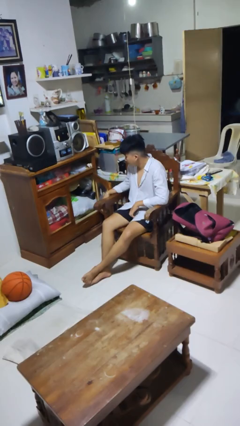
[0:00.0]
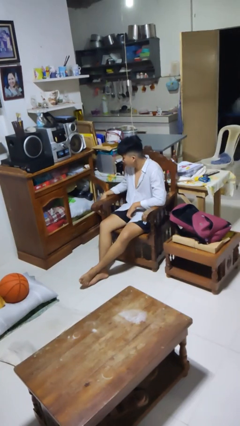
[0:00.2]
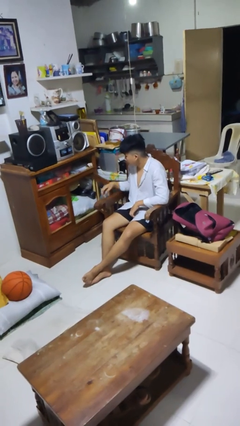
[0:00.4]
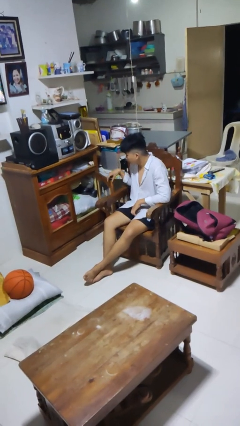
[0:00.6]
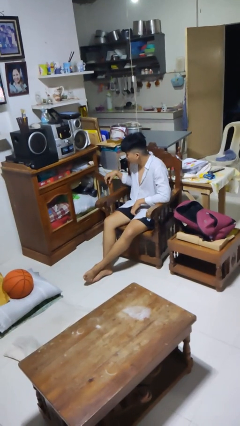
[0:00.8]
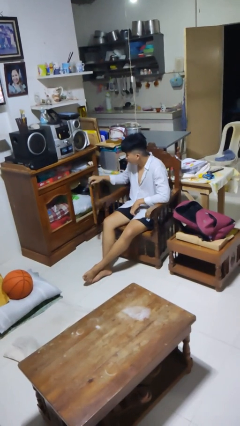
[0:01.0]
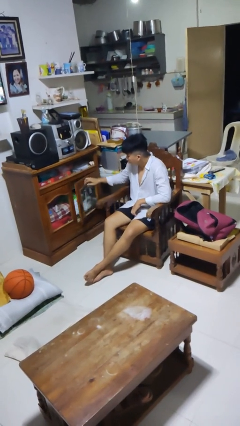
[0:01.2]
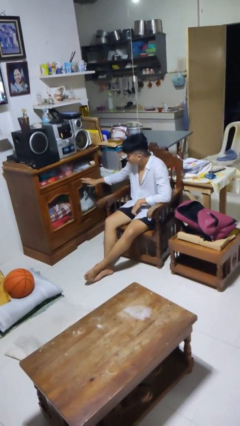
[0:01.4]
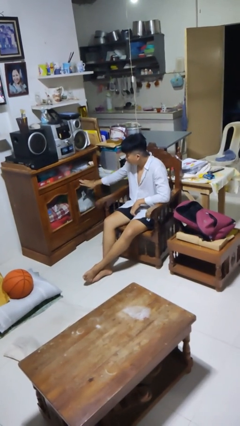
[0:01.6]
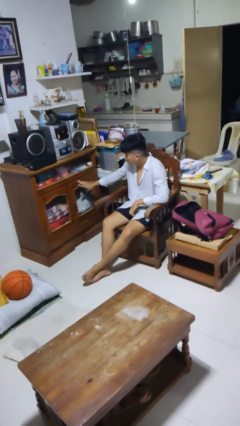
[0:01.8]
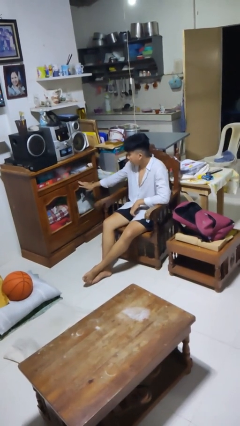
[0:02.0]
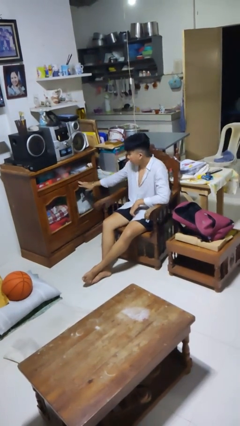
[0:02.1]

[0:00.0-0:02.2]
person closes dresser drawer

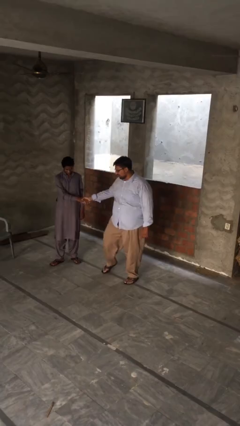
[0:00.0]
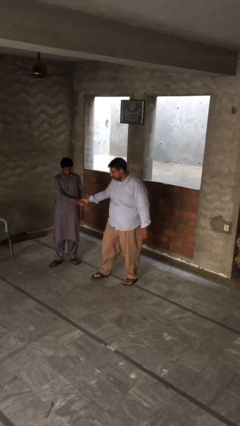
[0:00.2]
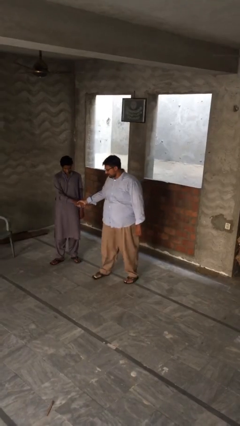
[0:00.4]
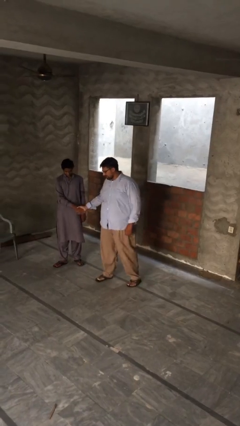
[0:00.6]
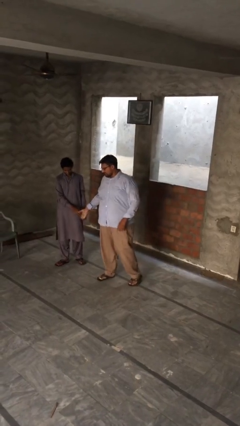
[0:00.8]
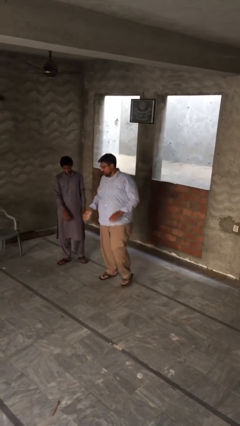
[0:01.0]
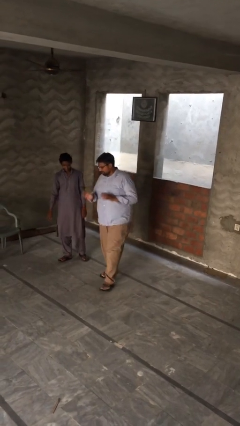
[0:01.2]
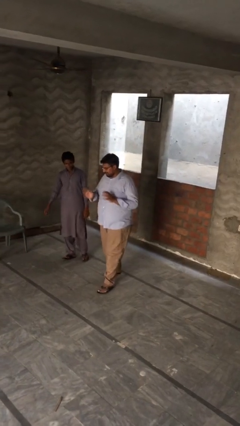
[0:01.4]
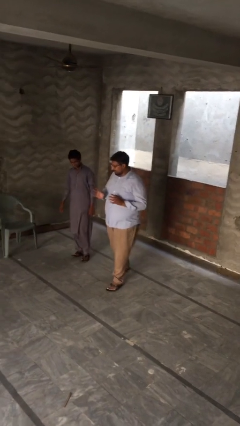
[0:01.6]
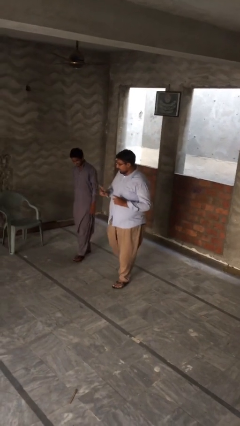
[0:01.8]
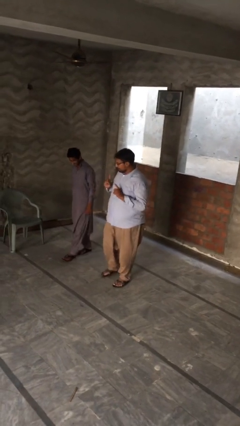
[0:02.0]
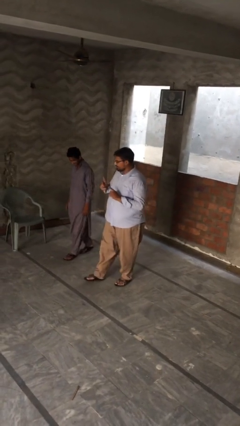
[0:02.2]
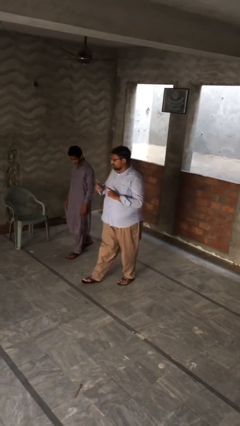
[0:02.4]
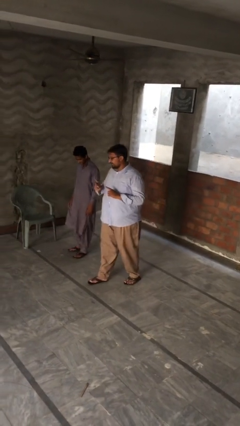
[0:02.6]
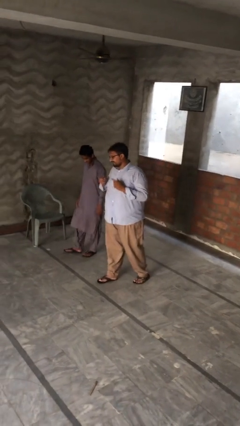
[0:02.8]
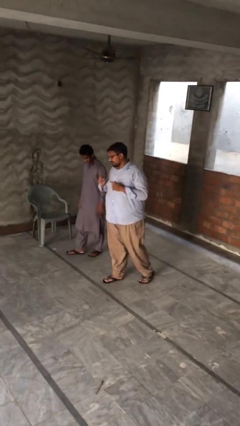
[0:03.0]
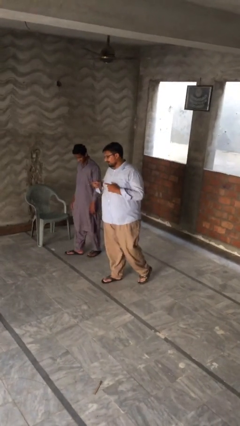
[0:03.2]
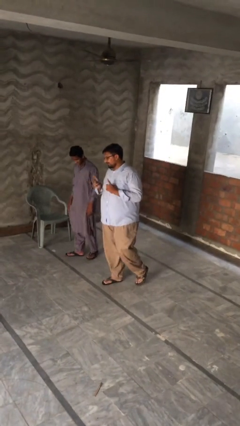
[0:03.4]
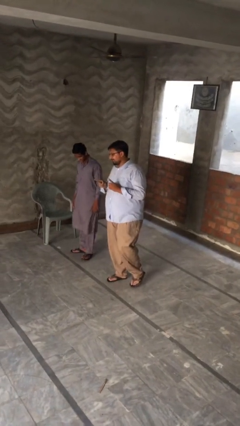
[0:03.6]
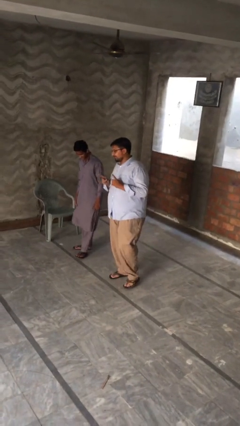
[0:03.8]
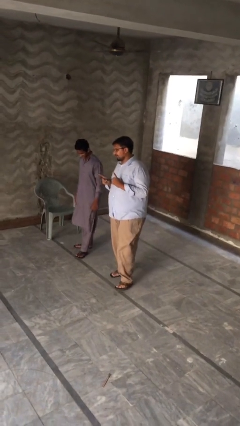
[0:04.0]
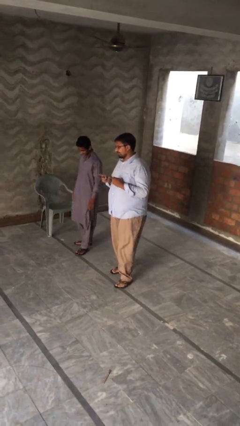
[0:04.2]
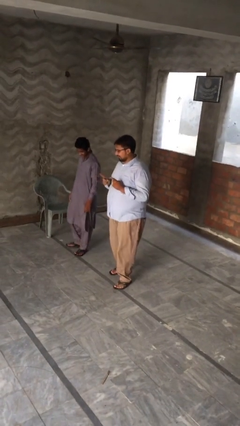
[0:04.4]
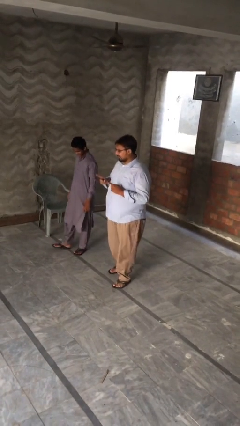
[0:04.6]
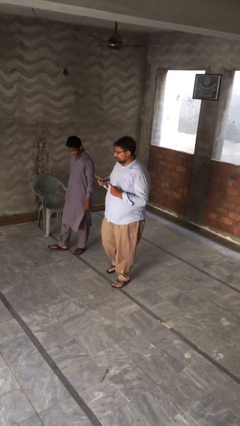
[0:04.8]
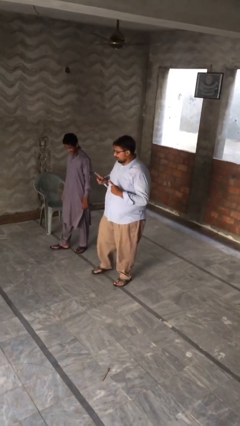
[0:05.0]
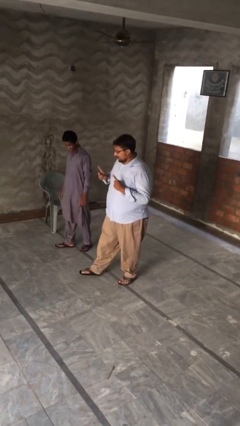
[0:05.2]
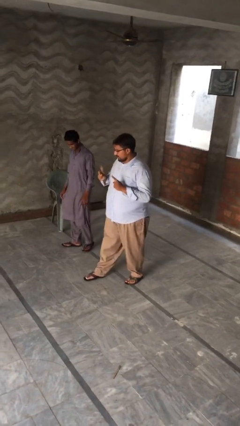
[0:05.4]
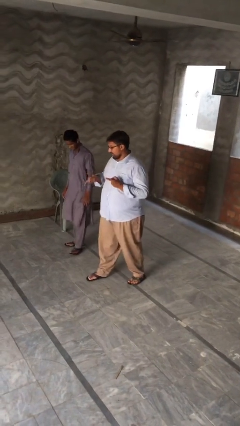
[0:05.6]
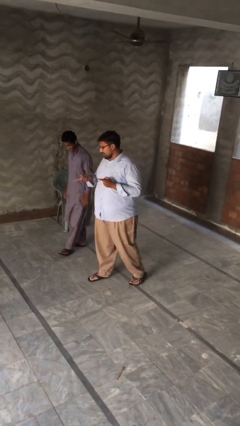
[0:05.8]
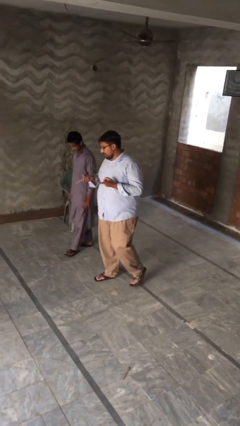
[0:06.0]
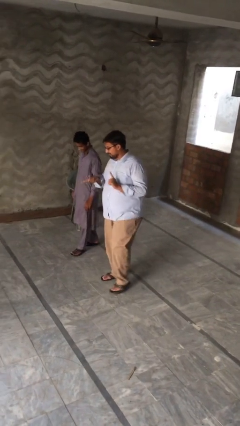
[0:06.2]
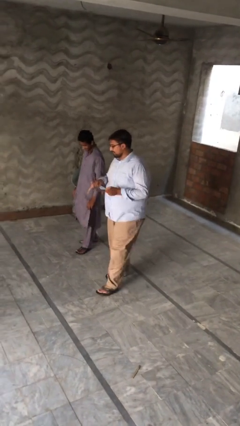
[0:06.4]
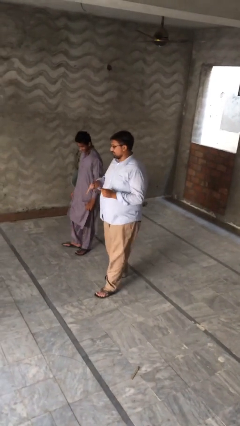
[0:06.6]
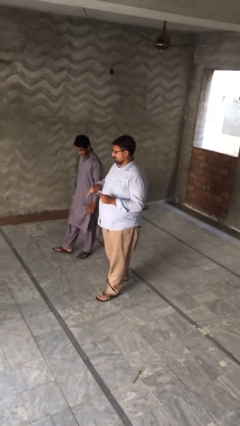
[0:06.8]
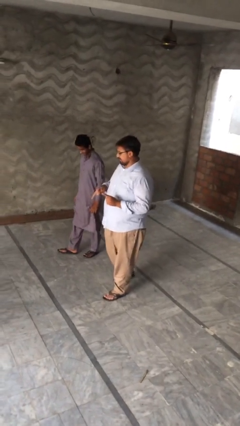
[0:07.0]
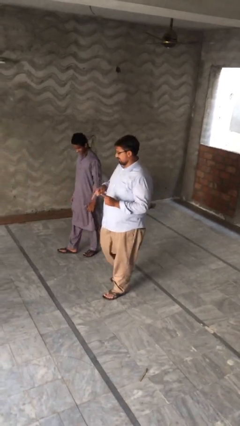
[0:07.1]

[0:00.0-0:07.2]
person talks to person

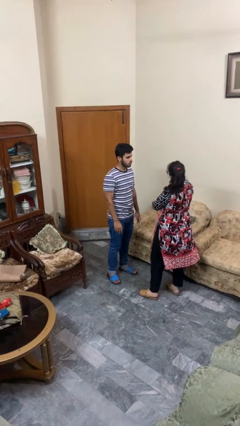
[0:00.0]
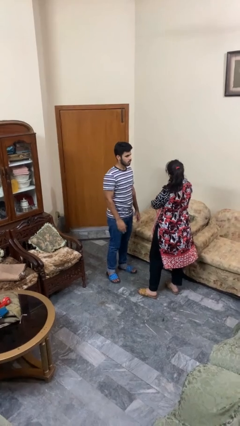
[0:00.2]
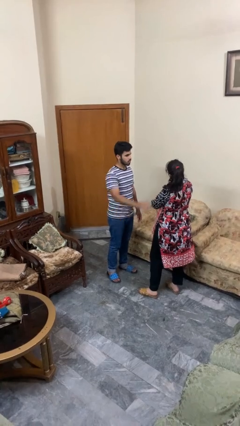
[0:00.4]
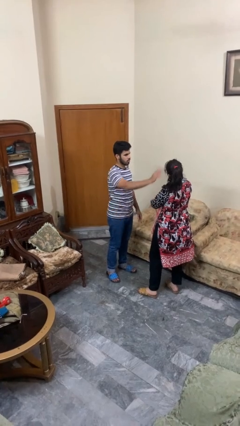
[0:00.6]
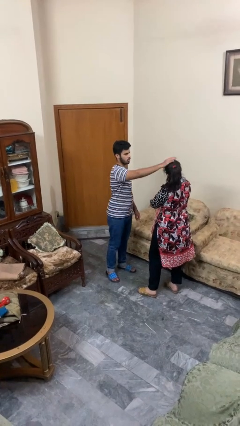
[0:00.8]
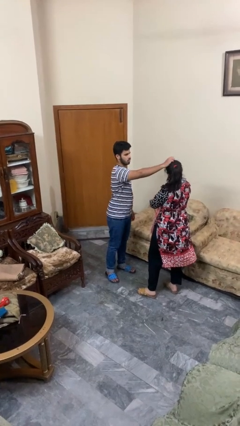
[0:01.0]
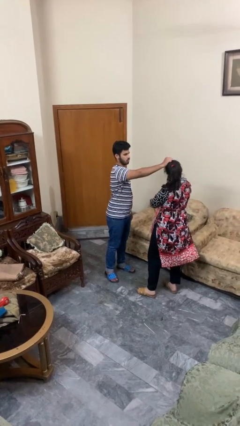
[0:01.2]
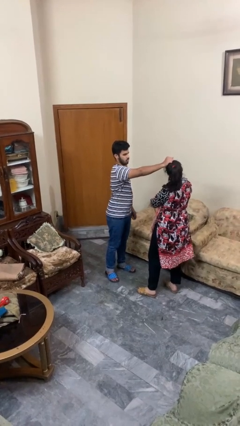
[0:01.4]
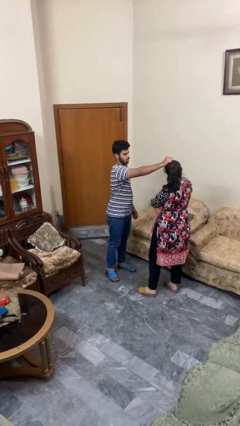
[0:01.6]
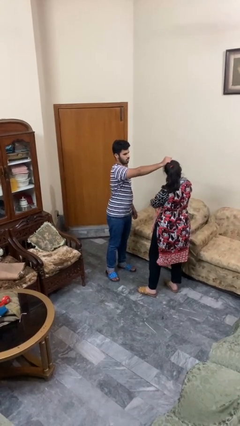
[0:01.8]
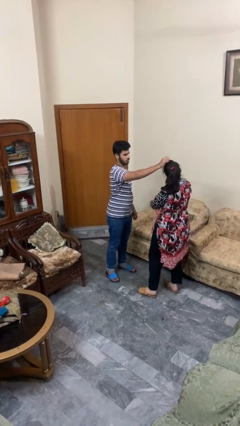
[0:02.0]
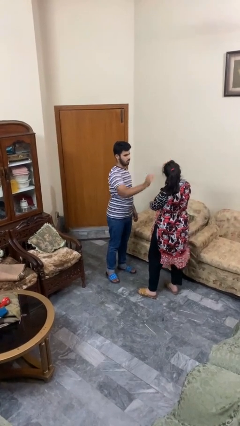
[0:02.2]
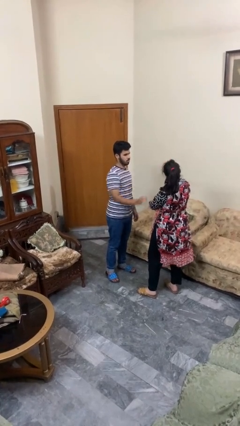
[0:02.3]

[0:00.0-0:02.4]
person grabs person by hair

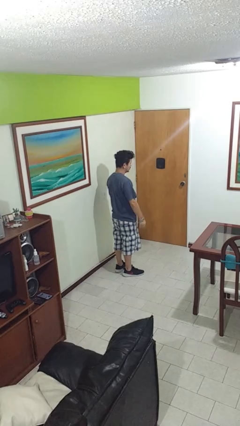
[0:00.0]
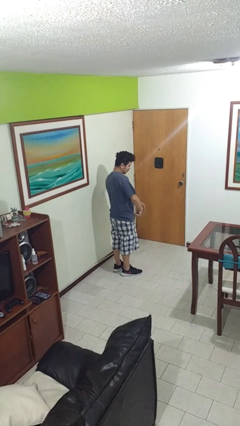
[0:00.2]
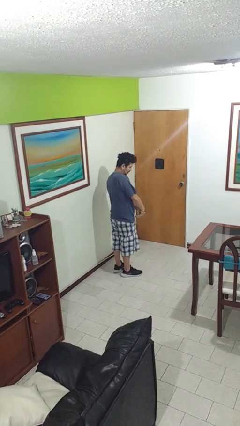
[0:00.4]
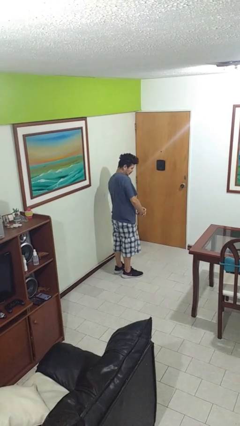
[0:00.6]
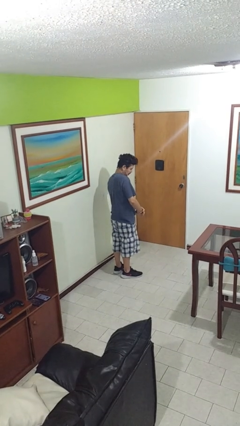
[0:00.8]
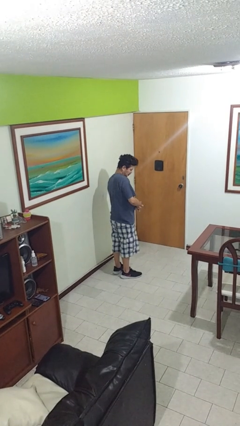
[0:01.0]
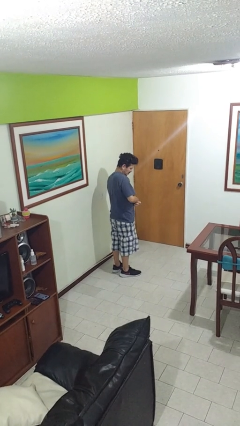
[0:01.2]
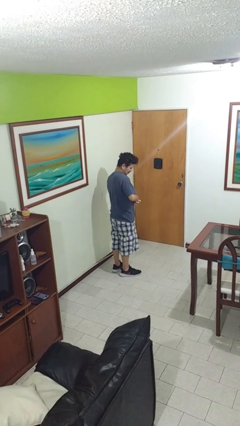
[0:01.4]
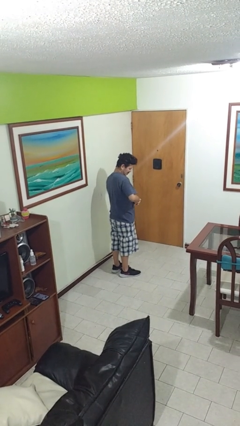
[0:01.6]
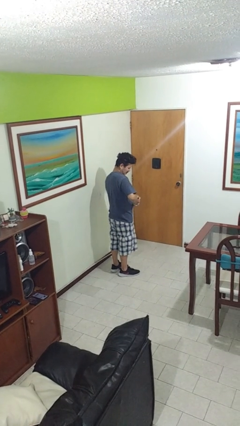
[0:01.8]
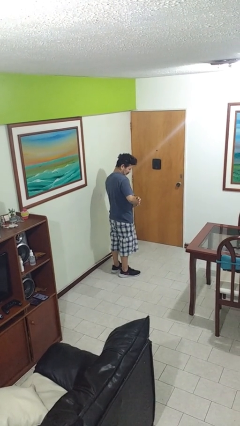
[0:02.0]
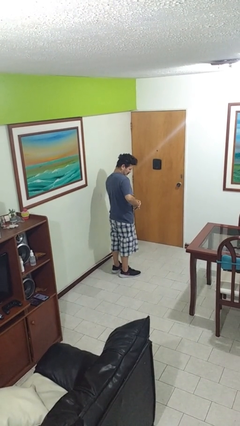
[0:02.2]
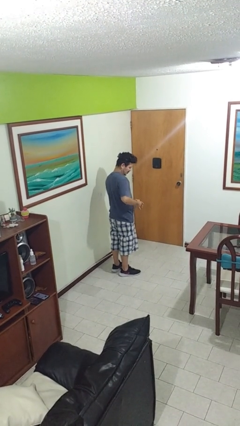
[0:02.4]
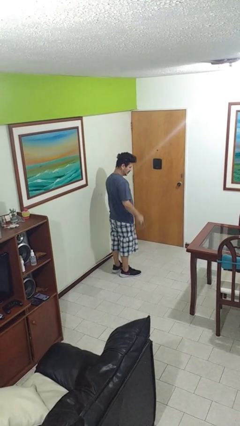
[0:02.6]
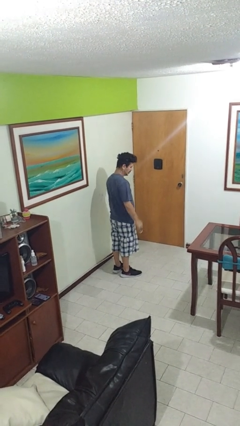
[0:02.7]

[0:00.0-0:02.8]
person takes off wristwatch

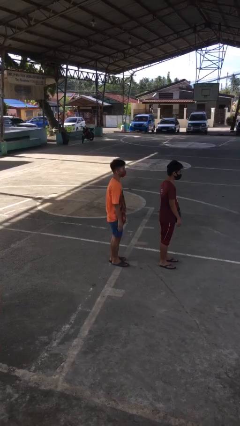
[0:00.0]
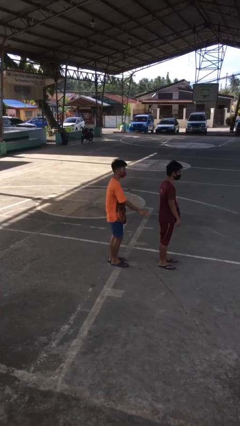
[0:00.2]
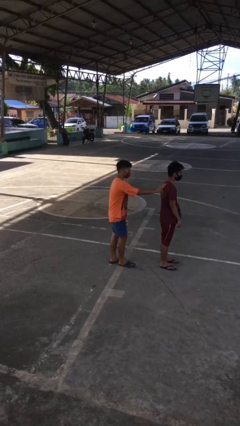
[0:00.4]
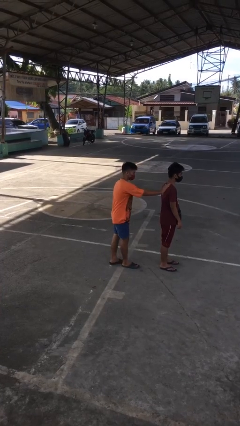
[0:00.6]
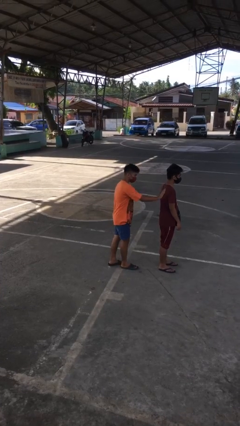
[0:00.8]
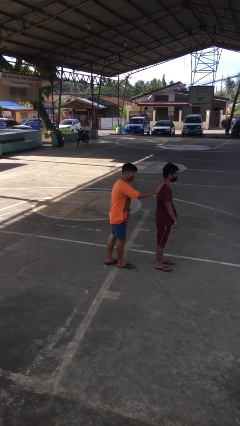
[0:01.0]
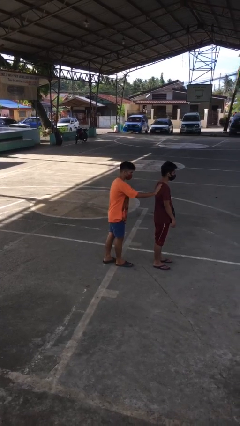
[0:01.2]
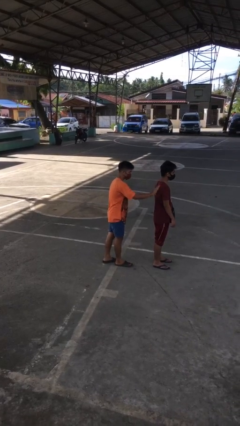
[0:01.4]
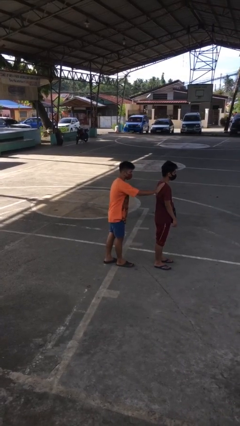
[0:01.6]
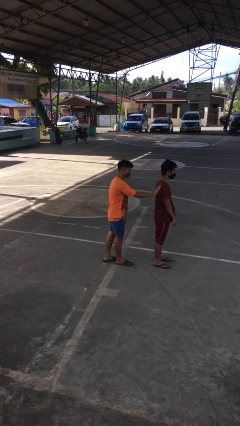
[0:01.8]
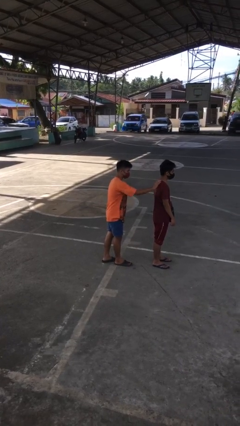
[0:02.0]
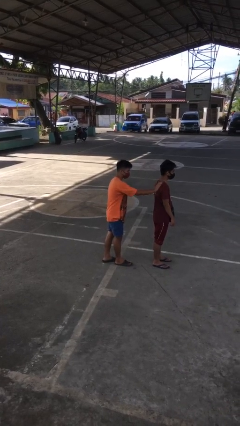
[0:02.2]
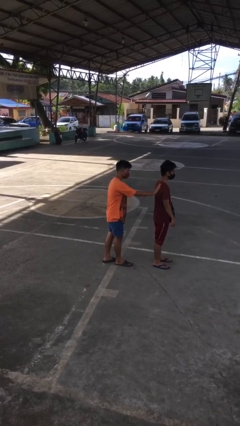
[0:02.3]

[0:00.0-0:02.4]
person touches back of person

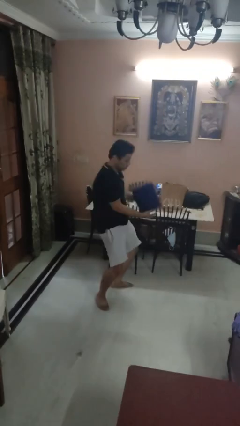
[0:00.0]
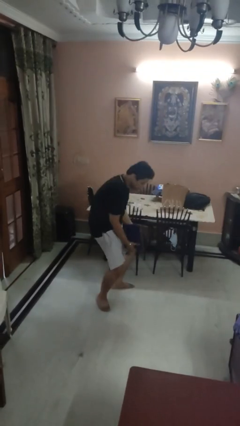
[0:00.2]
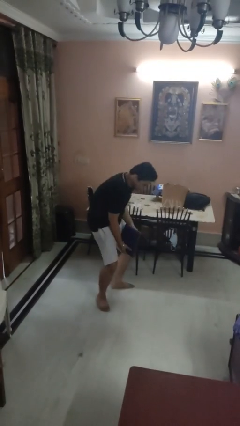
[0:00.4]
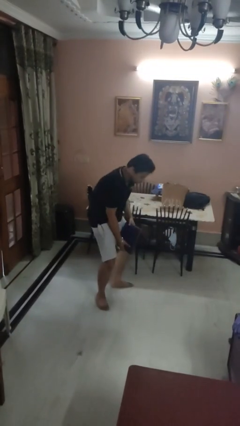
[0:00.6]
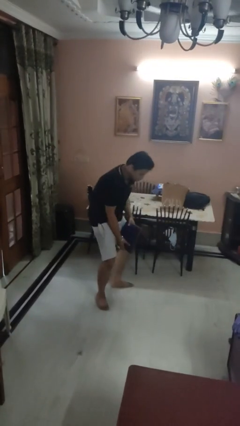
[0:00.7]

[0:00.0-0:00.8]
person catches dropped object
